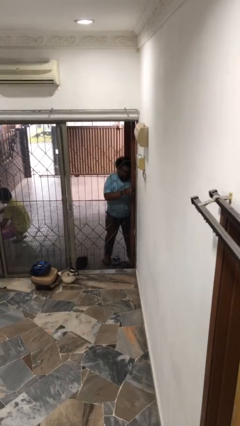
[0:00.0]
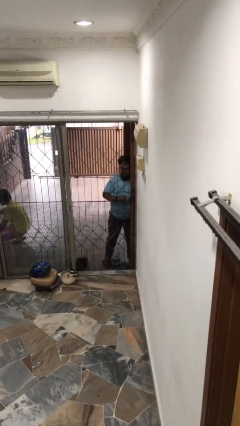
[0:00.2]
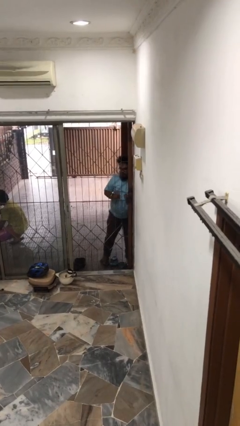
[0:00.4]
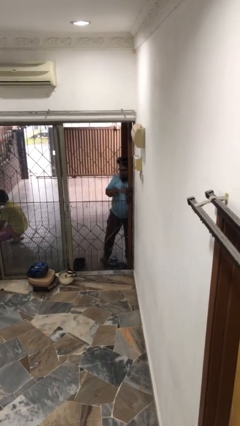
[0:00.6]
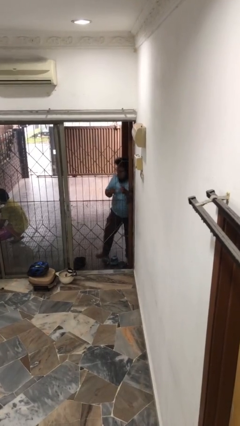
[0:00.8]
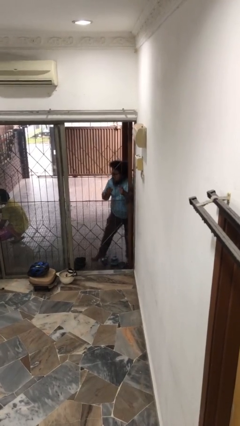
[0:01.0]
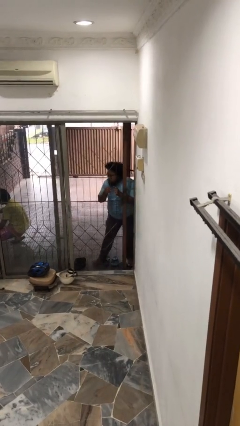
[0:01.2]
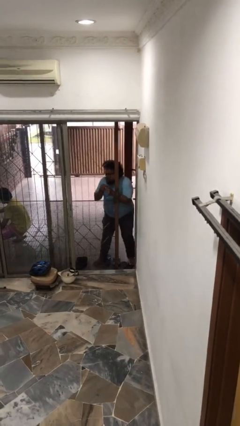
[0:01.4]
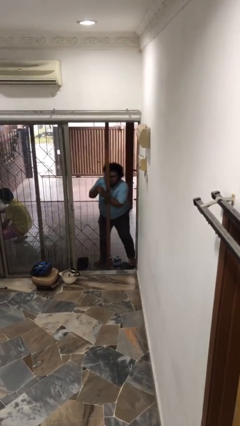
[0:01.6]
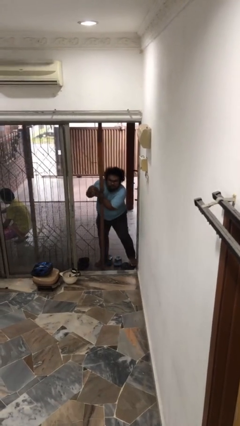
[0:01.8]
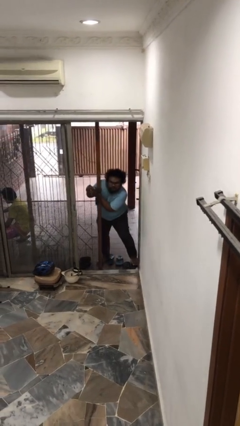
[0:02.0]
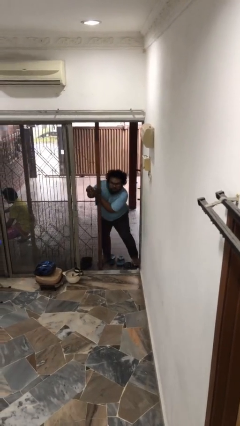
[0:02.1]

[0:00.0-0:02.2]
person opens facility door

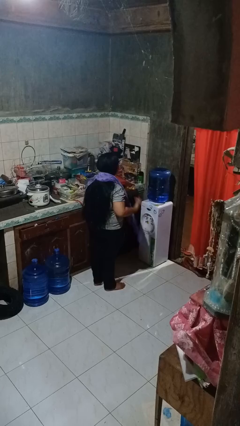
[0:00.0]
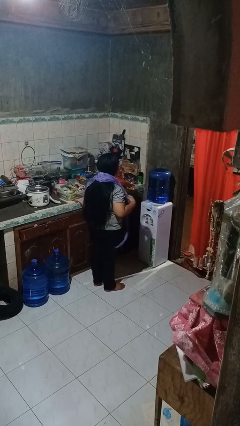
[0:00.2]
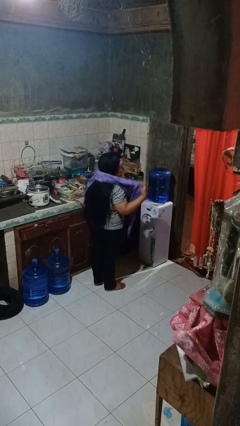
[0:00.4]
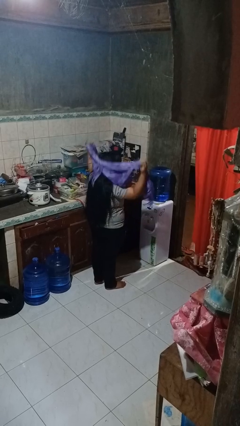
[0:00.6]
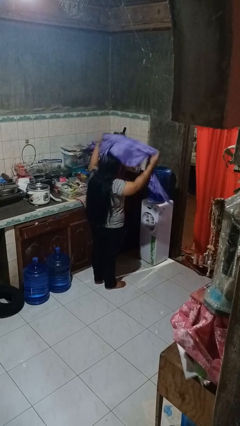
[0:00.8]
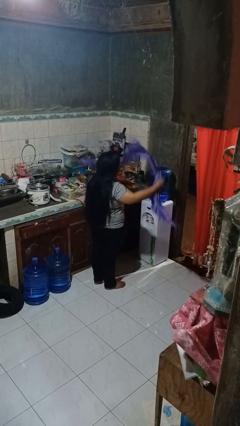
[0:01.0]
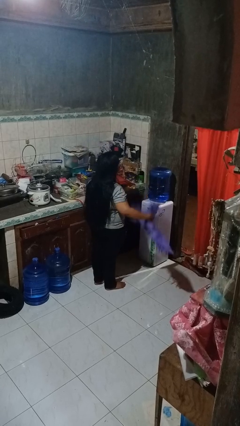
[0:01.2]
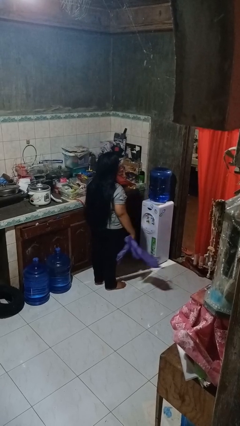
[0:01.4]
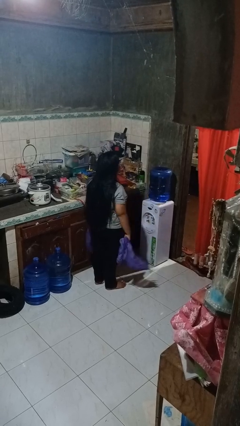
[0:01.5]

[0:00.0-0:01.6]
person takes off scarf

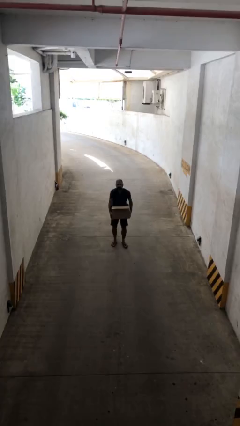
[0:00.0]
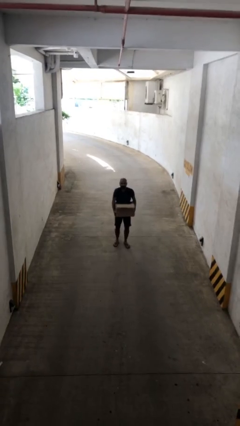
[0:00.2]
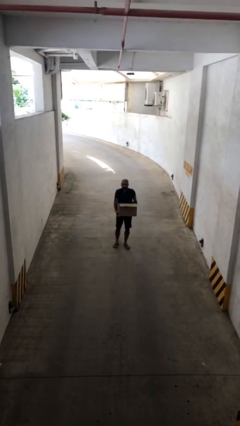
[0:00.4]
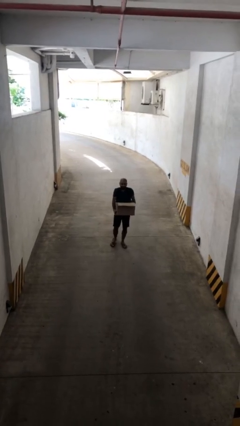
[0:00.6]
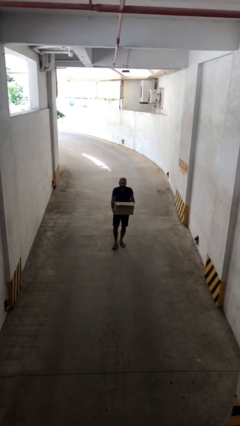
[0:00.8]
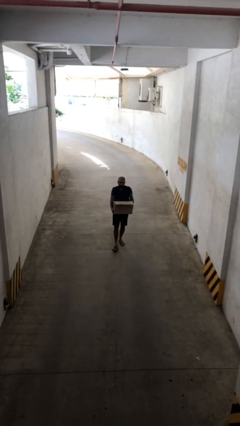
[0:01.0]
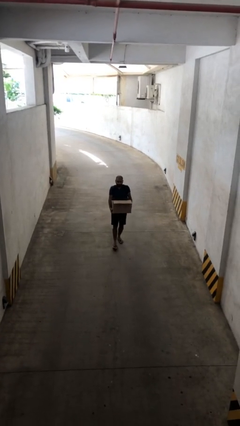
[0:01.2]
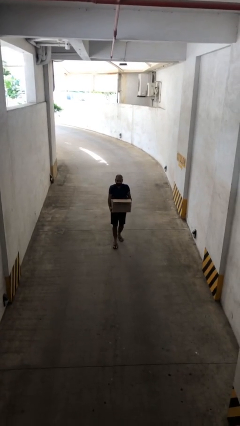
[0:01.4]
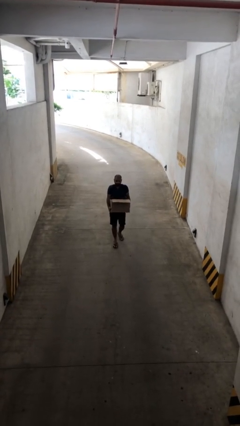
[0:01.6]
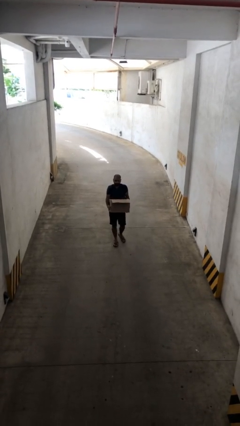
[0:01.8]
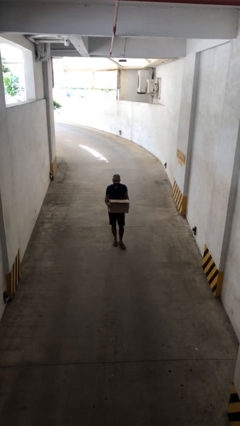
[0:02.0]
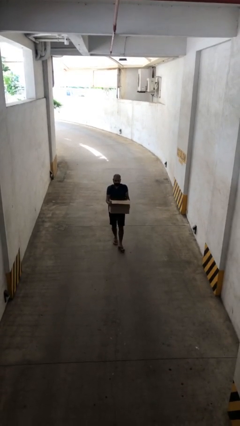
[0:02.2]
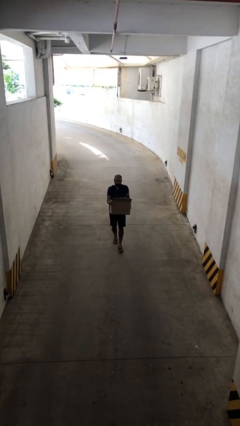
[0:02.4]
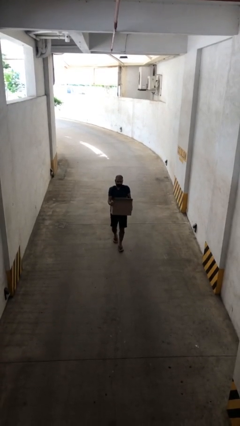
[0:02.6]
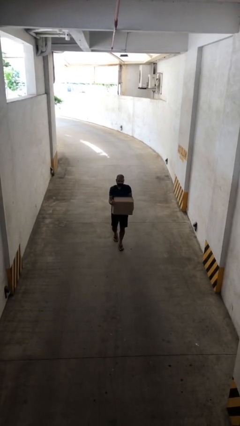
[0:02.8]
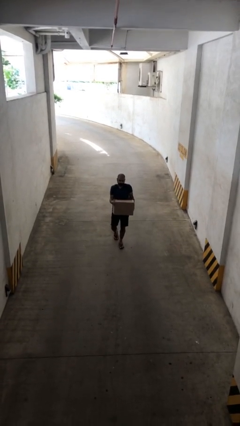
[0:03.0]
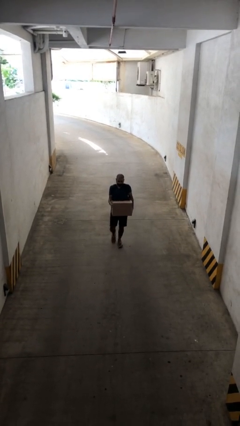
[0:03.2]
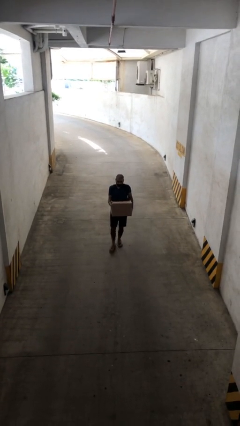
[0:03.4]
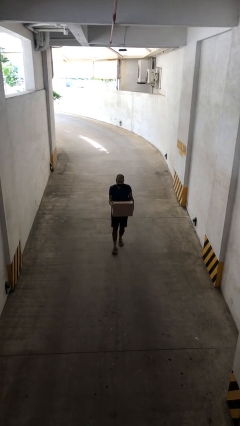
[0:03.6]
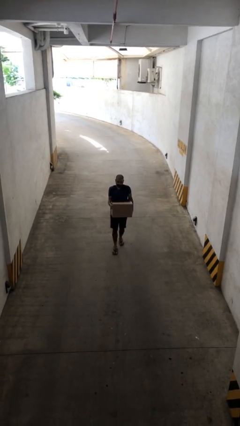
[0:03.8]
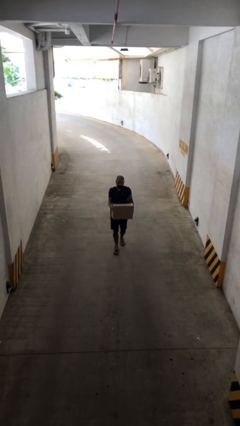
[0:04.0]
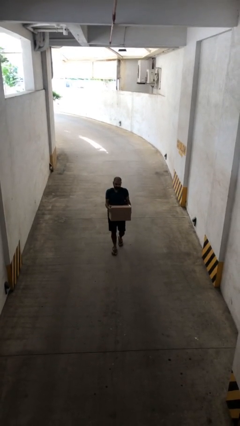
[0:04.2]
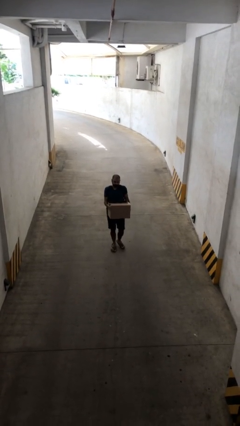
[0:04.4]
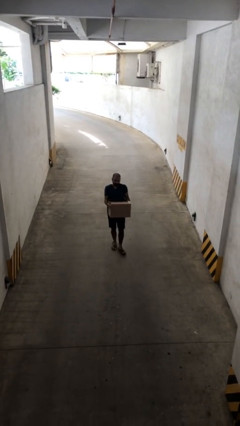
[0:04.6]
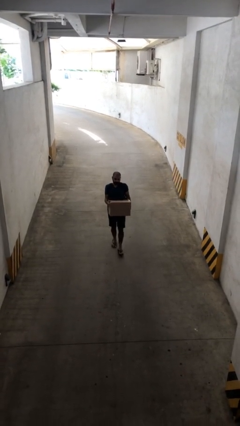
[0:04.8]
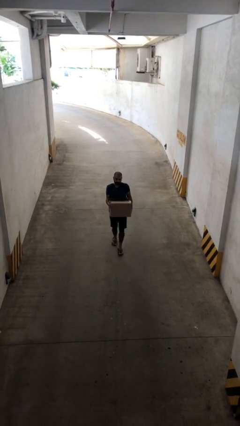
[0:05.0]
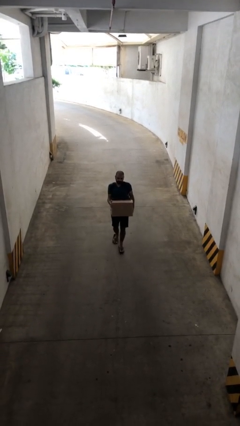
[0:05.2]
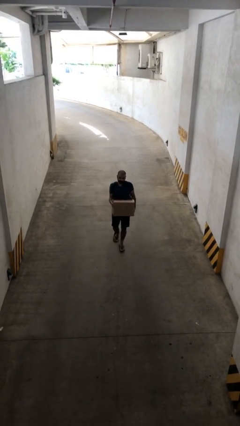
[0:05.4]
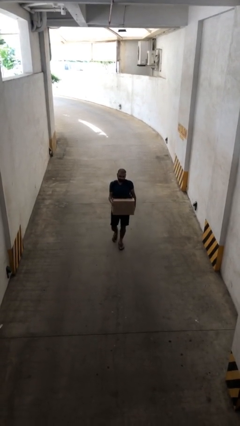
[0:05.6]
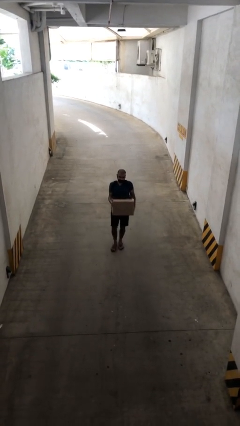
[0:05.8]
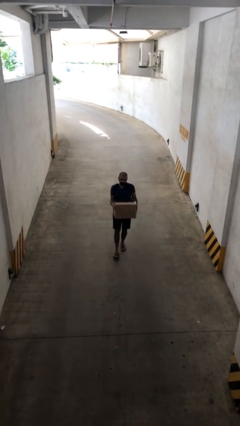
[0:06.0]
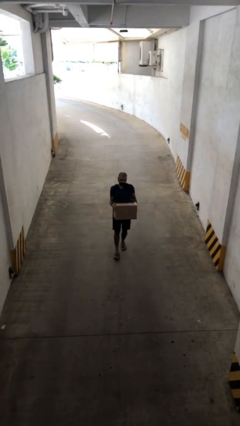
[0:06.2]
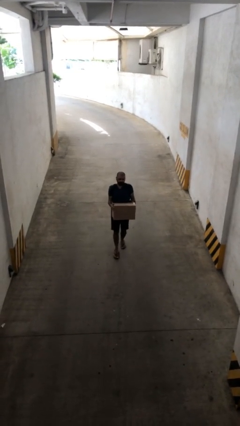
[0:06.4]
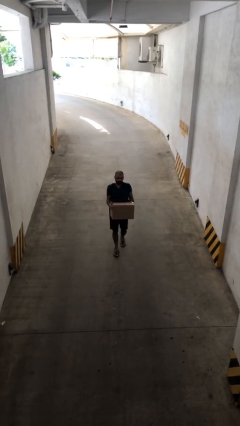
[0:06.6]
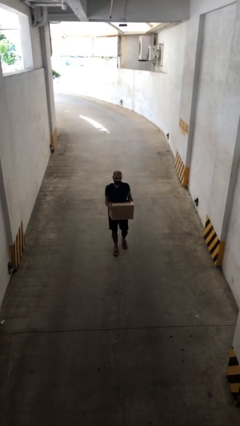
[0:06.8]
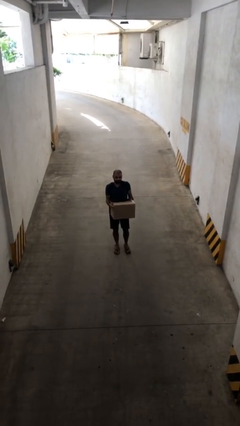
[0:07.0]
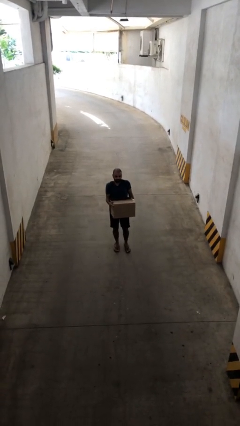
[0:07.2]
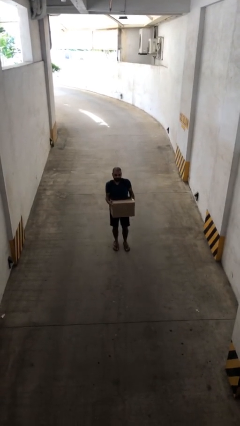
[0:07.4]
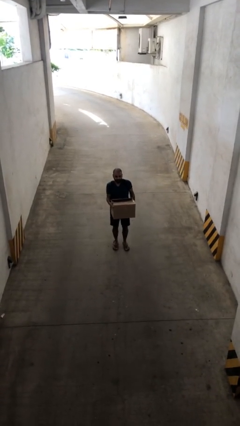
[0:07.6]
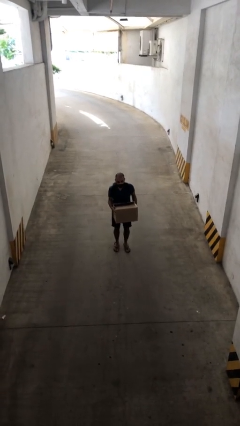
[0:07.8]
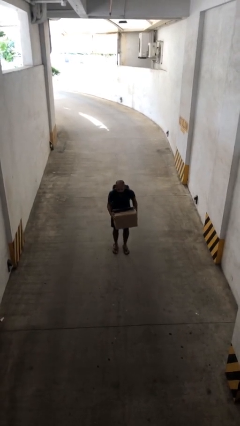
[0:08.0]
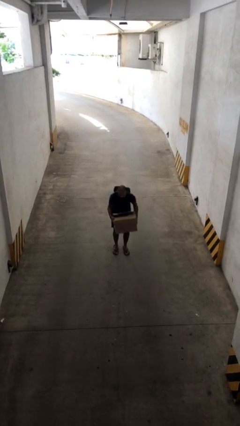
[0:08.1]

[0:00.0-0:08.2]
person carries heavy object

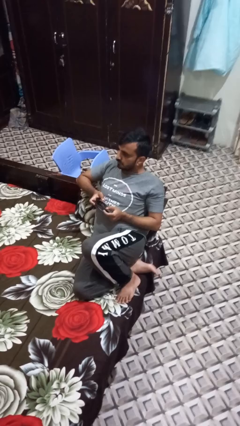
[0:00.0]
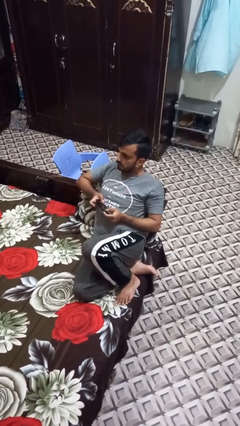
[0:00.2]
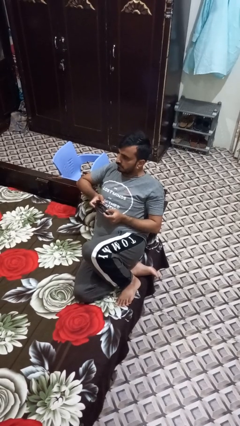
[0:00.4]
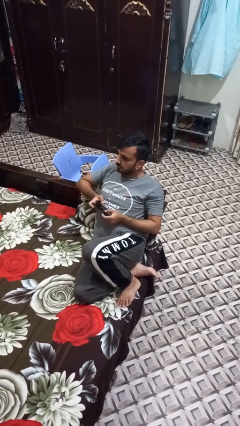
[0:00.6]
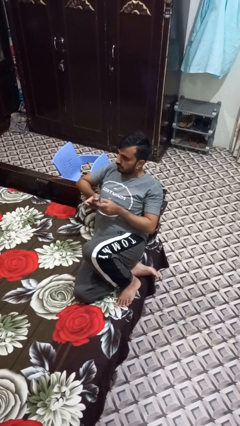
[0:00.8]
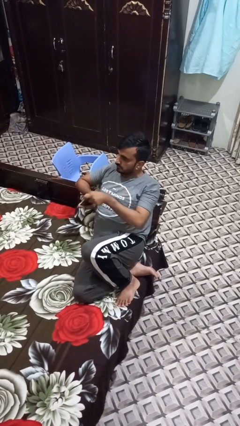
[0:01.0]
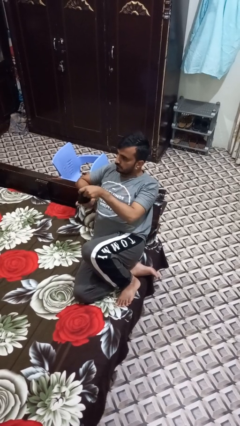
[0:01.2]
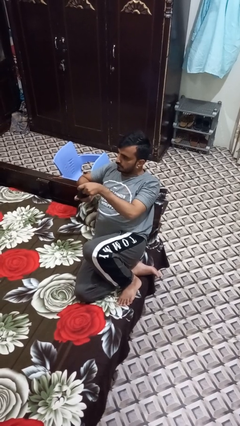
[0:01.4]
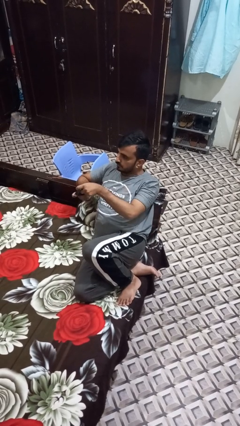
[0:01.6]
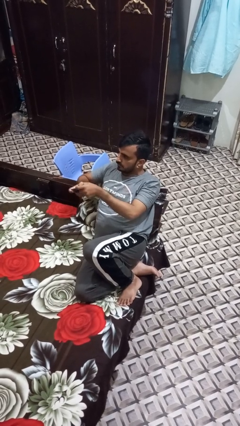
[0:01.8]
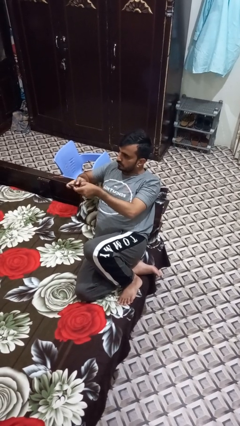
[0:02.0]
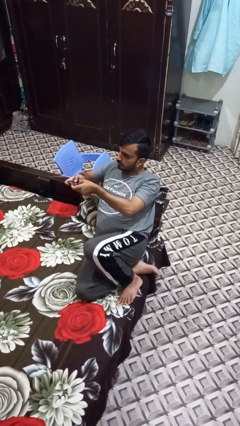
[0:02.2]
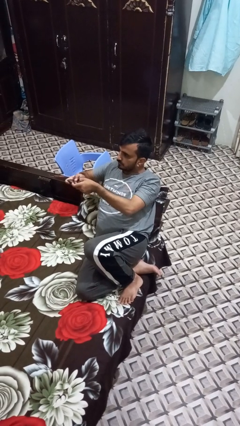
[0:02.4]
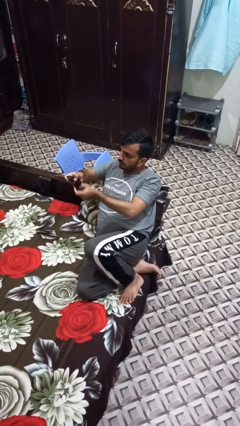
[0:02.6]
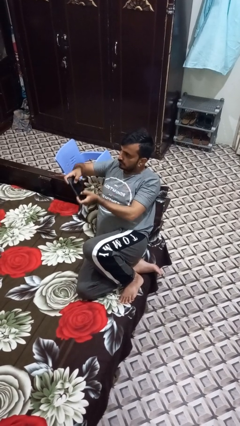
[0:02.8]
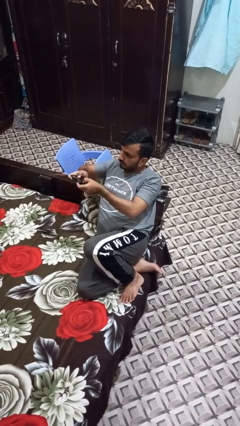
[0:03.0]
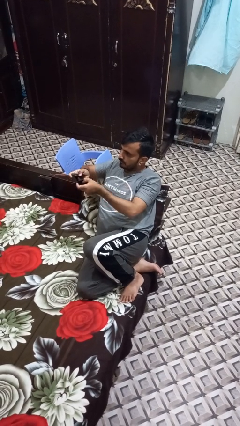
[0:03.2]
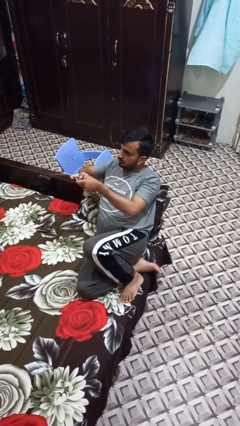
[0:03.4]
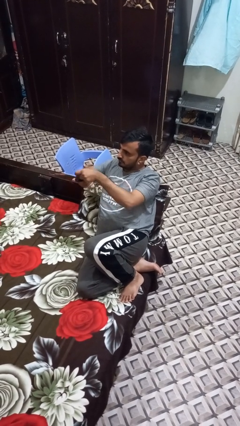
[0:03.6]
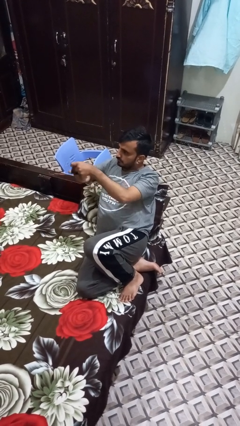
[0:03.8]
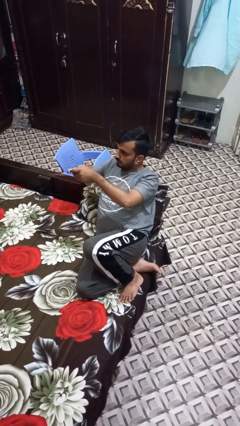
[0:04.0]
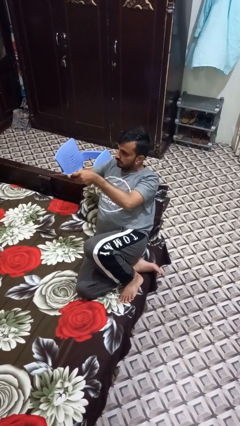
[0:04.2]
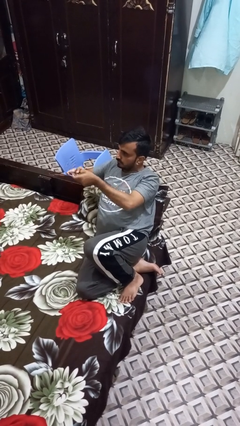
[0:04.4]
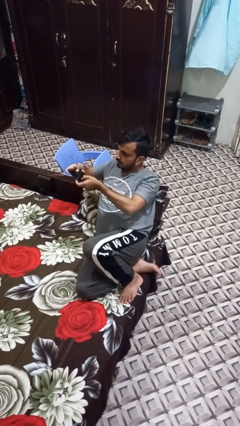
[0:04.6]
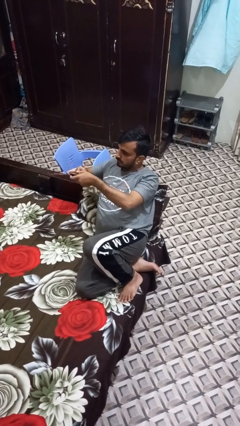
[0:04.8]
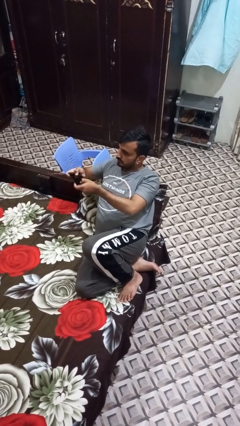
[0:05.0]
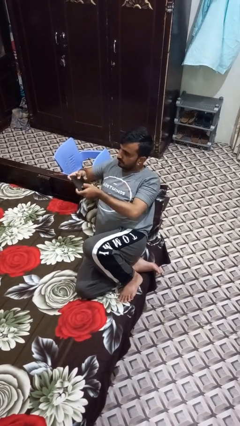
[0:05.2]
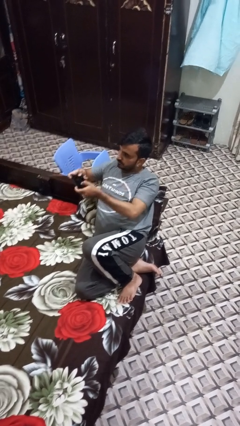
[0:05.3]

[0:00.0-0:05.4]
person interacts with handheld game

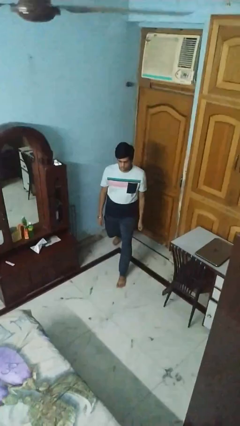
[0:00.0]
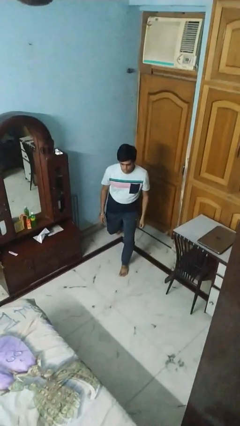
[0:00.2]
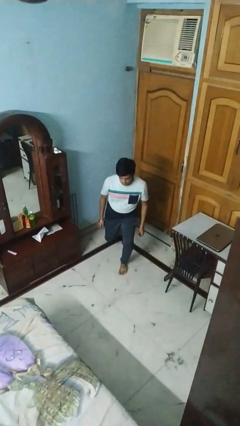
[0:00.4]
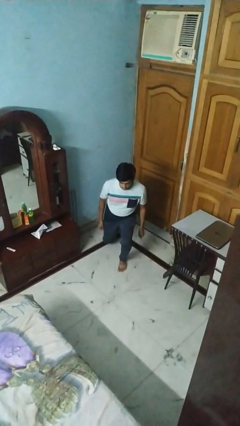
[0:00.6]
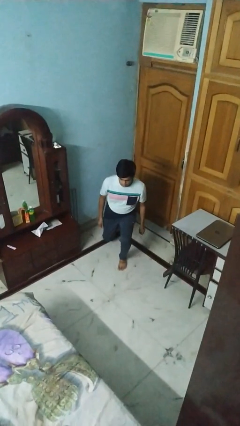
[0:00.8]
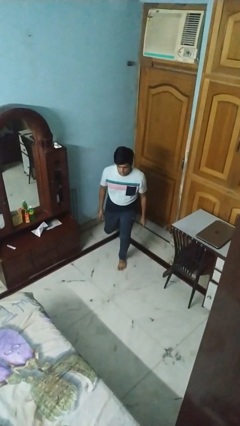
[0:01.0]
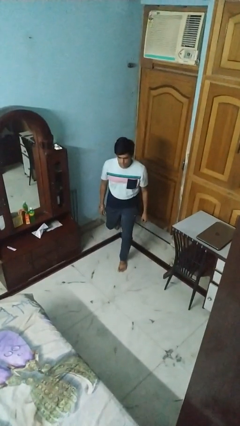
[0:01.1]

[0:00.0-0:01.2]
person exercises with lunges
